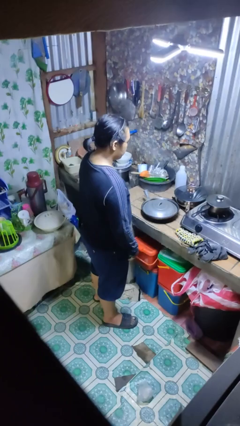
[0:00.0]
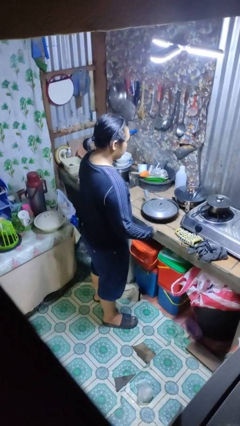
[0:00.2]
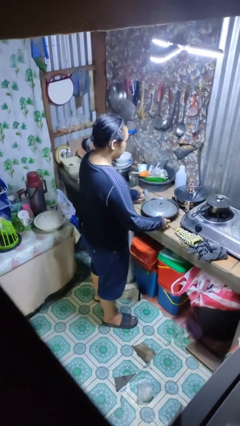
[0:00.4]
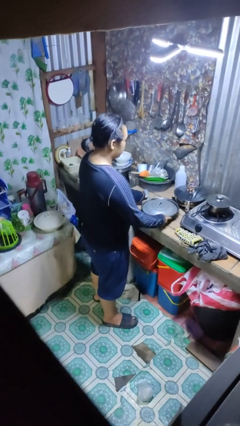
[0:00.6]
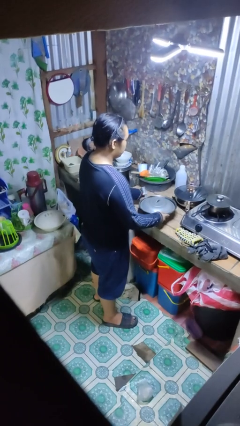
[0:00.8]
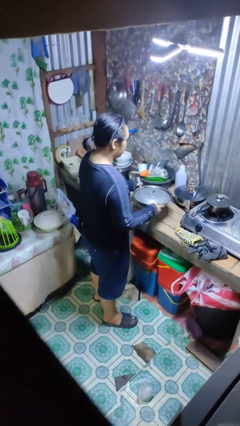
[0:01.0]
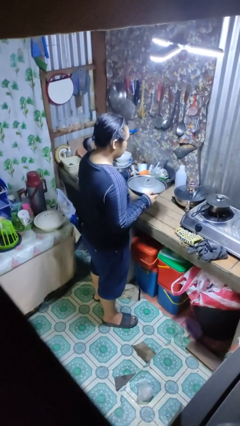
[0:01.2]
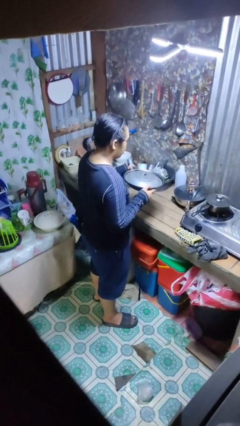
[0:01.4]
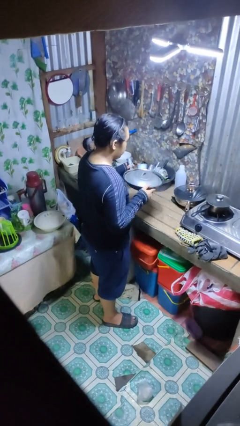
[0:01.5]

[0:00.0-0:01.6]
person picks up object from countertop

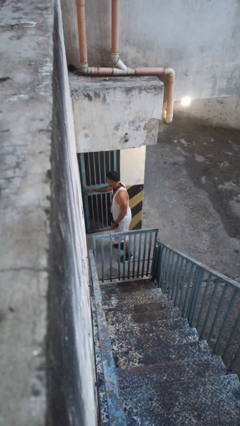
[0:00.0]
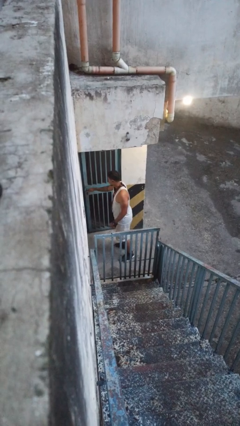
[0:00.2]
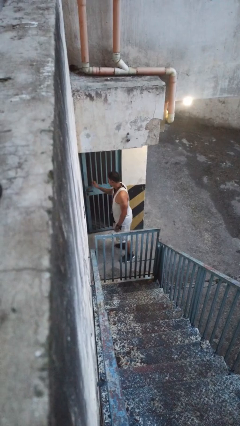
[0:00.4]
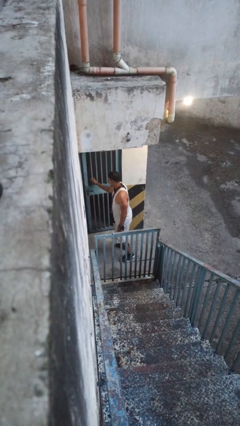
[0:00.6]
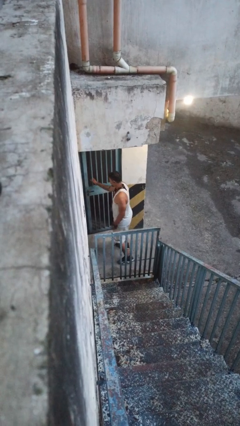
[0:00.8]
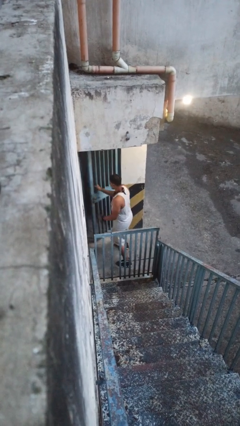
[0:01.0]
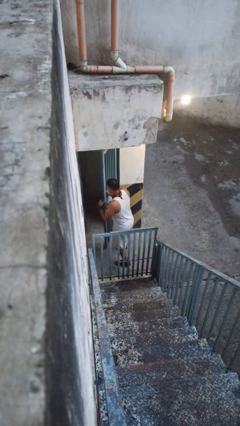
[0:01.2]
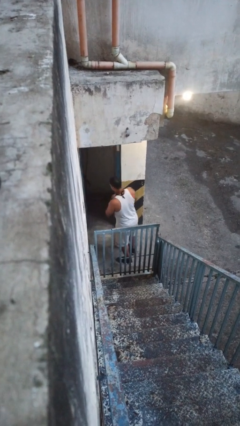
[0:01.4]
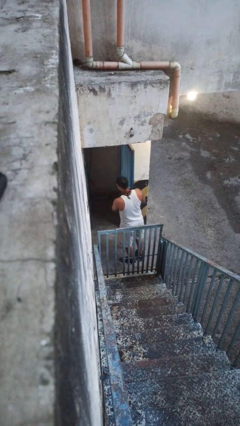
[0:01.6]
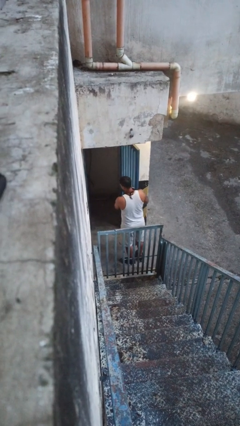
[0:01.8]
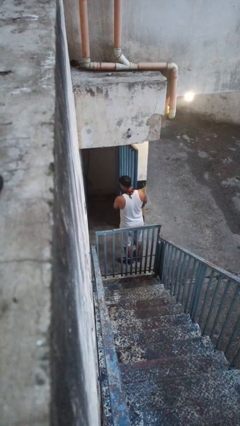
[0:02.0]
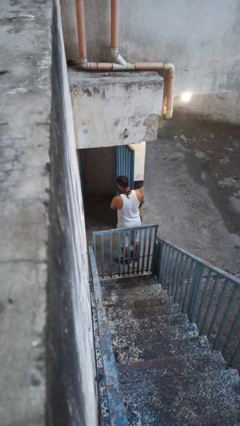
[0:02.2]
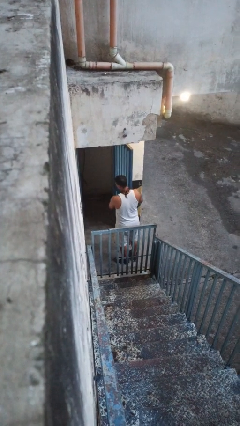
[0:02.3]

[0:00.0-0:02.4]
person opens facility door

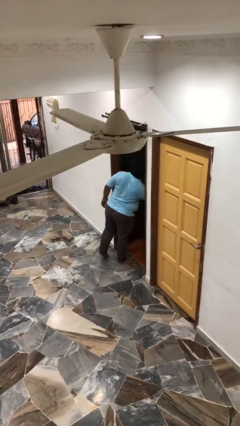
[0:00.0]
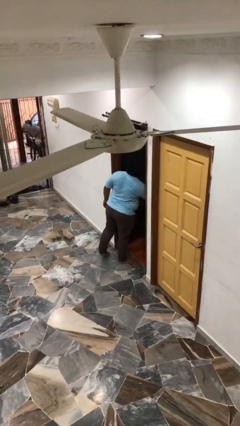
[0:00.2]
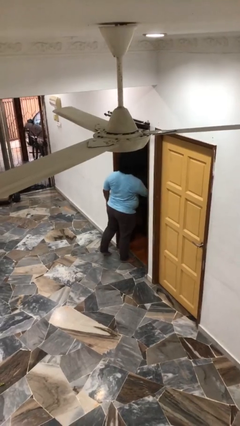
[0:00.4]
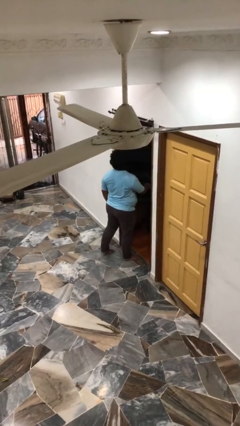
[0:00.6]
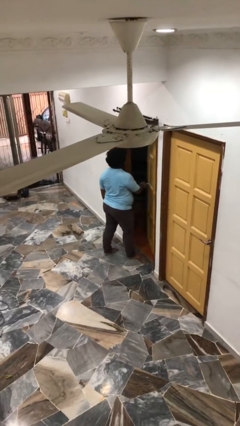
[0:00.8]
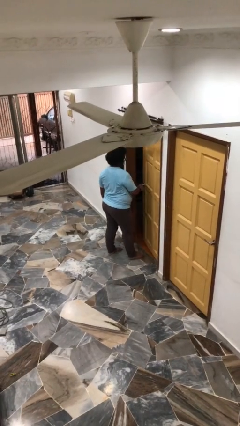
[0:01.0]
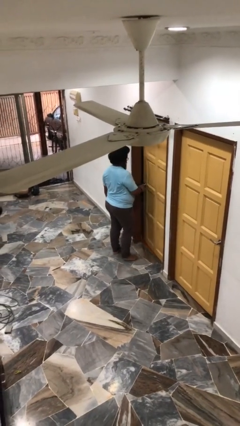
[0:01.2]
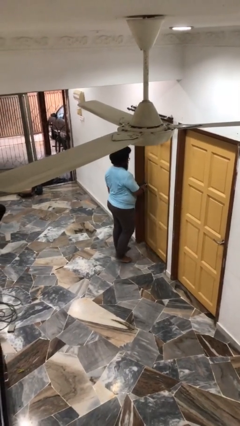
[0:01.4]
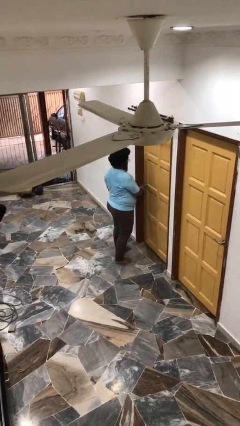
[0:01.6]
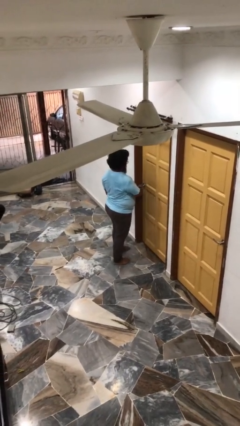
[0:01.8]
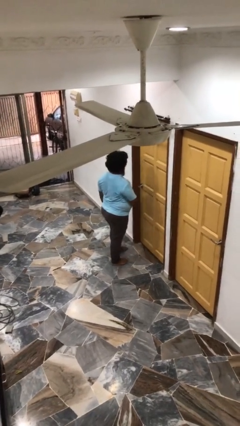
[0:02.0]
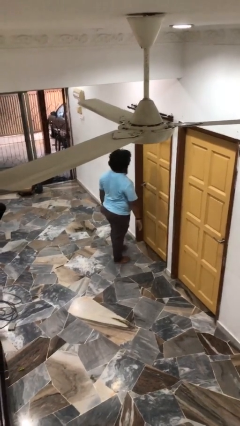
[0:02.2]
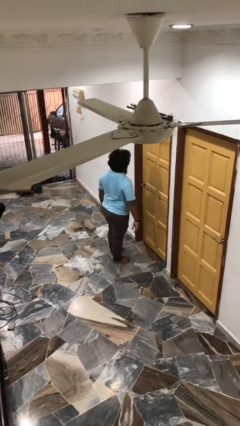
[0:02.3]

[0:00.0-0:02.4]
person closes facility door

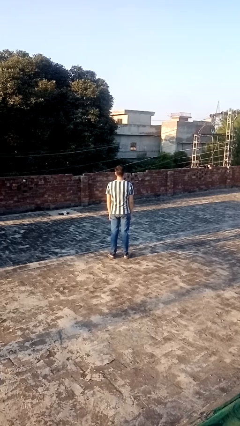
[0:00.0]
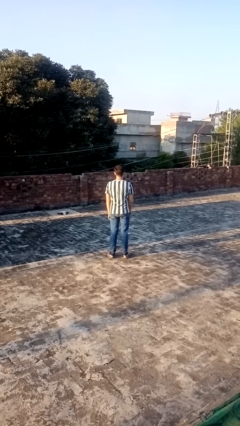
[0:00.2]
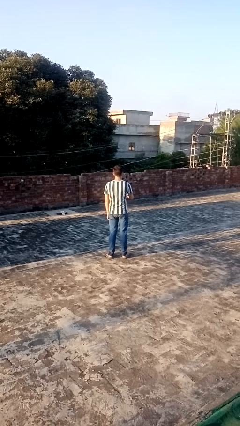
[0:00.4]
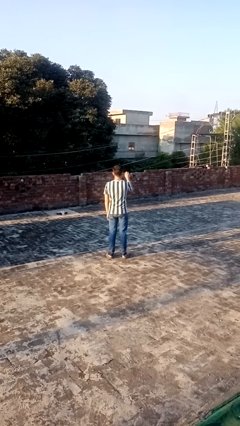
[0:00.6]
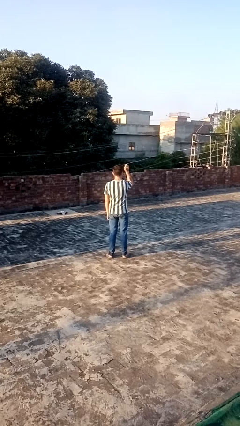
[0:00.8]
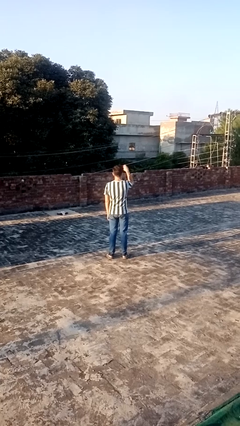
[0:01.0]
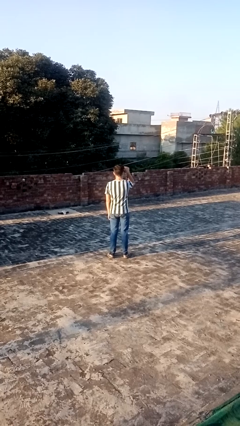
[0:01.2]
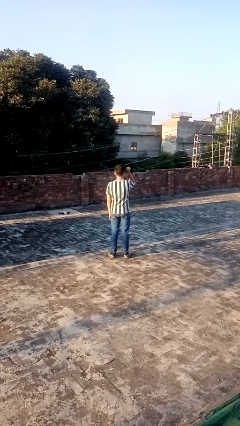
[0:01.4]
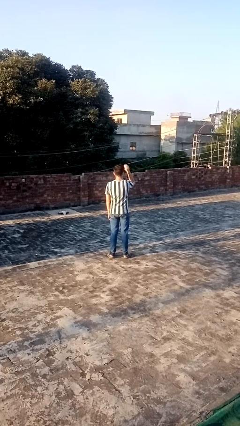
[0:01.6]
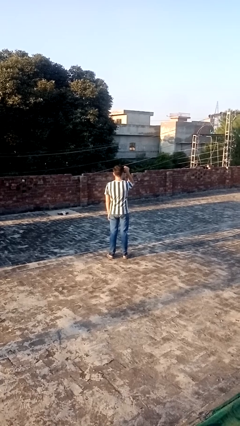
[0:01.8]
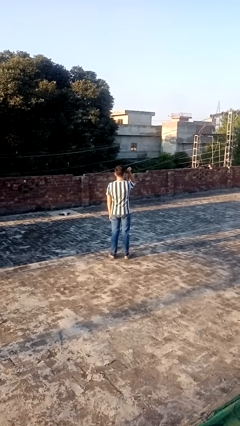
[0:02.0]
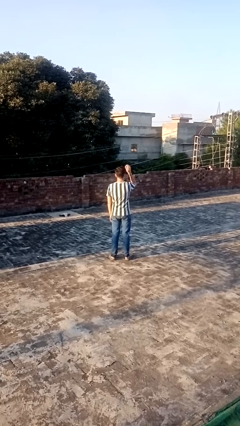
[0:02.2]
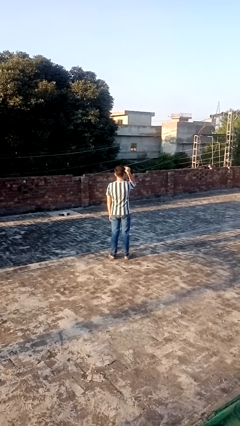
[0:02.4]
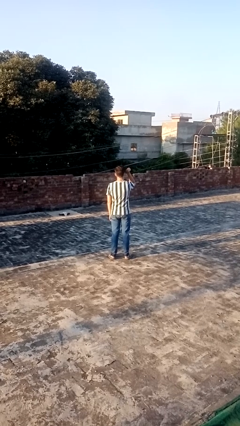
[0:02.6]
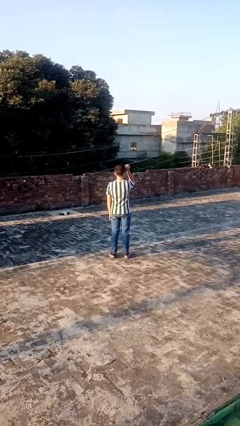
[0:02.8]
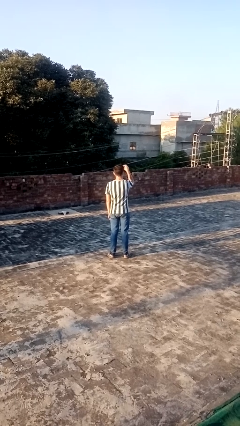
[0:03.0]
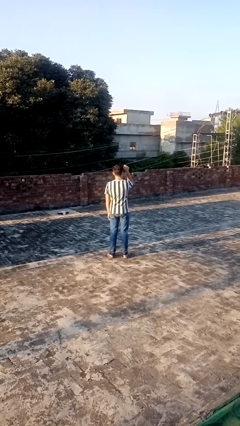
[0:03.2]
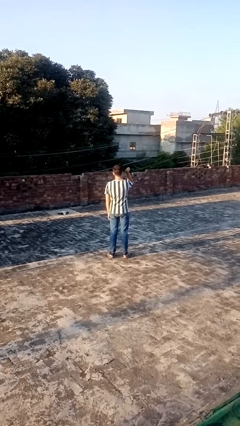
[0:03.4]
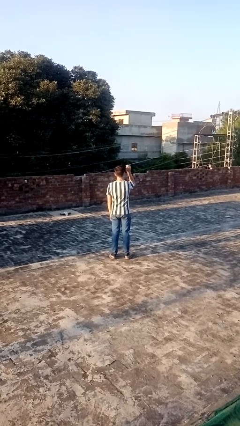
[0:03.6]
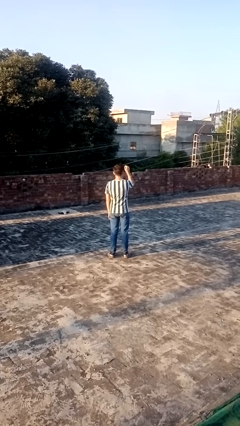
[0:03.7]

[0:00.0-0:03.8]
person gestures come here

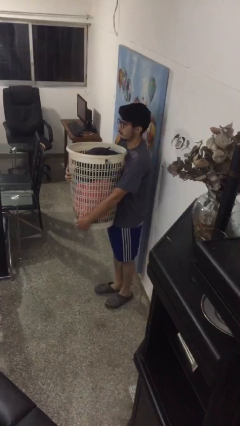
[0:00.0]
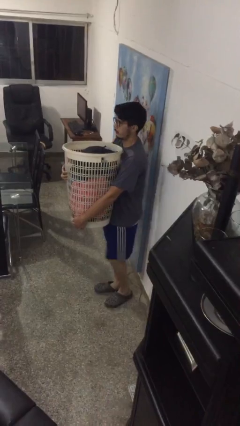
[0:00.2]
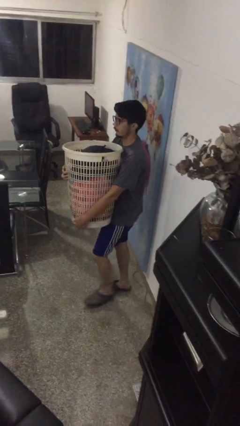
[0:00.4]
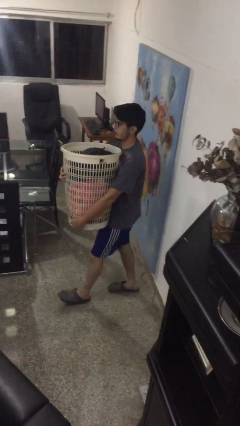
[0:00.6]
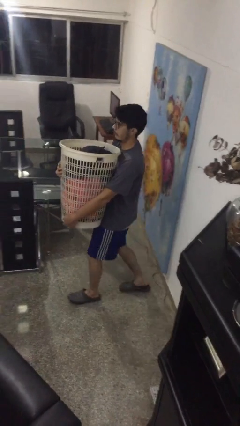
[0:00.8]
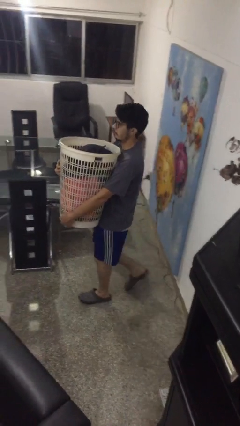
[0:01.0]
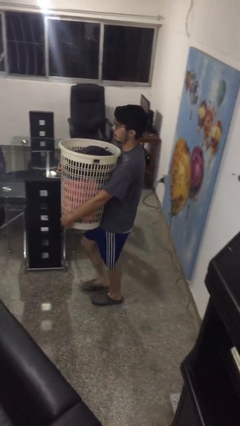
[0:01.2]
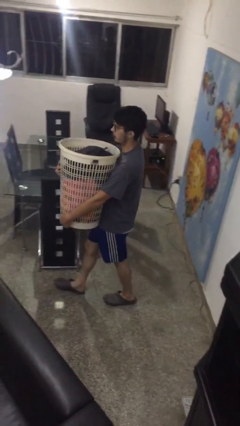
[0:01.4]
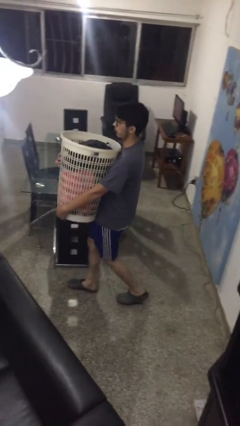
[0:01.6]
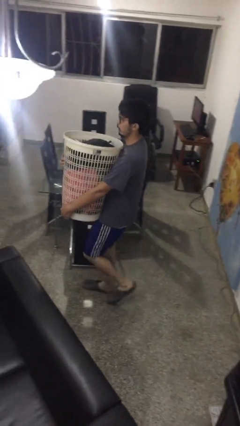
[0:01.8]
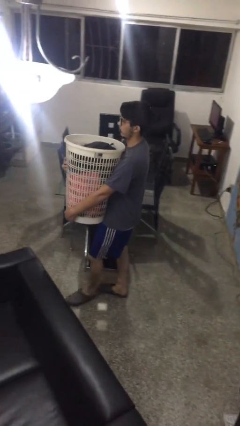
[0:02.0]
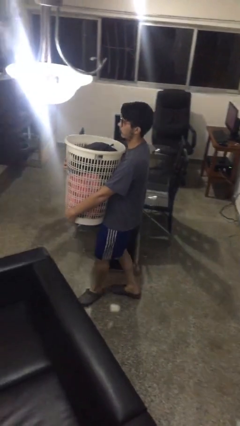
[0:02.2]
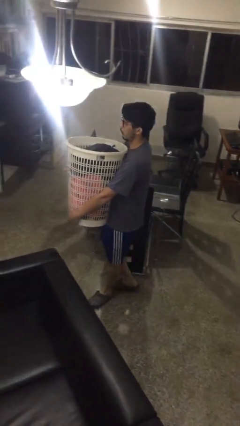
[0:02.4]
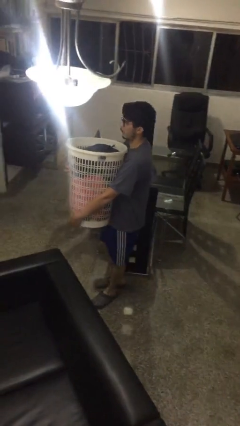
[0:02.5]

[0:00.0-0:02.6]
person carries laundry basket

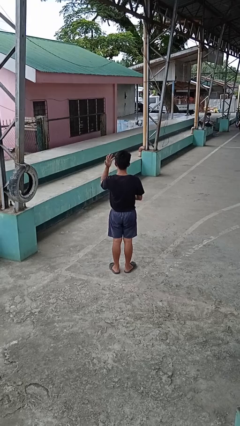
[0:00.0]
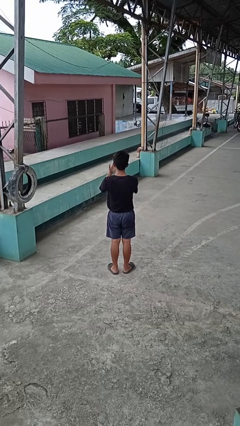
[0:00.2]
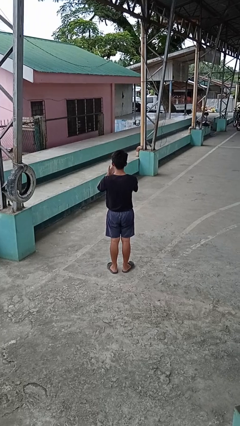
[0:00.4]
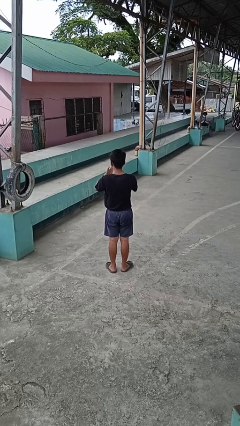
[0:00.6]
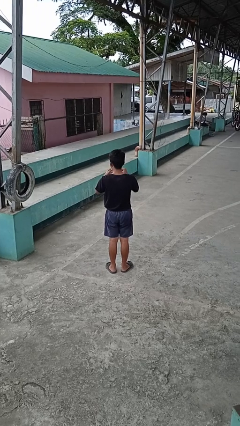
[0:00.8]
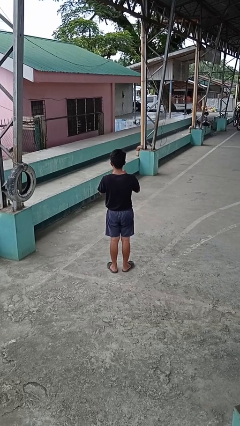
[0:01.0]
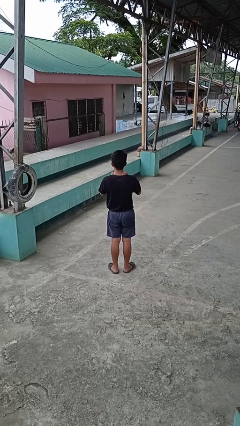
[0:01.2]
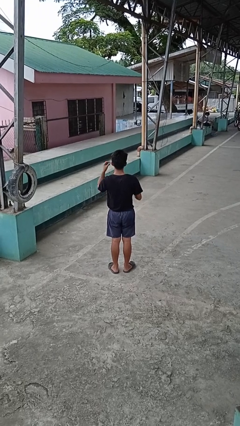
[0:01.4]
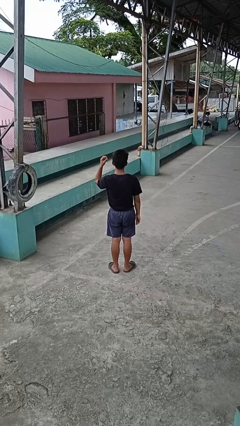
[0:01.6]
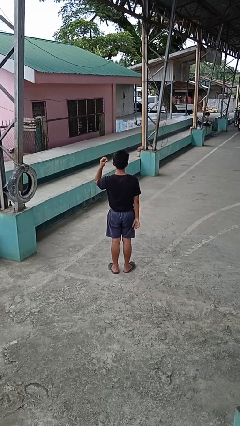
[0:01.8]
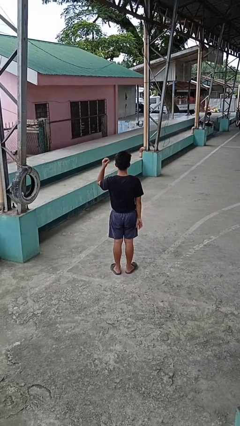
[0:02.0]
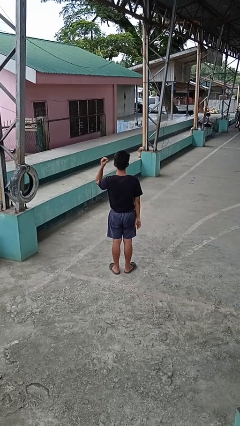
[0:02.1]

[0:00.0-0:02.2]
person takes off ring

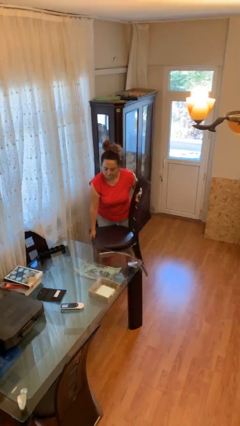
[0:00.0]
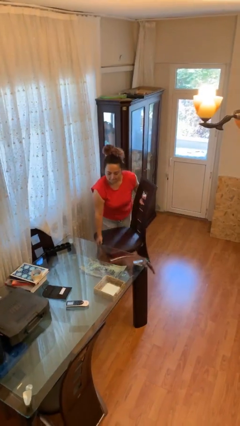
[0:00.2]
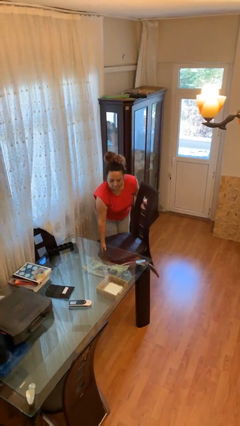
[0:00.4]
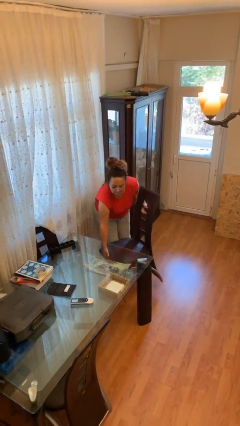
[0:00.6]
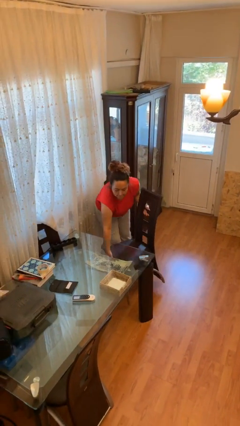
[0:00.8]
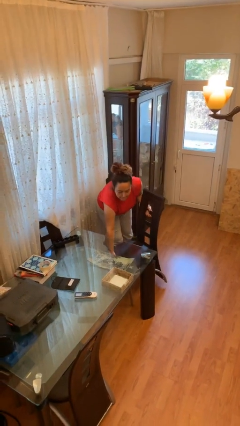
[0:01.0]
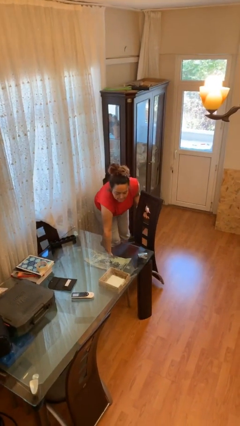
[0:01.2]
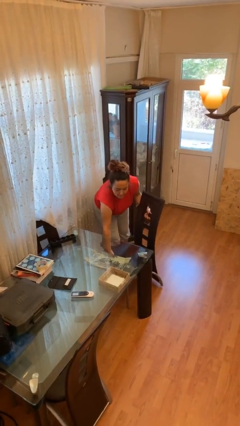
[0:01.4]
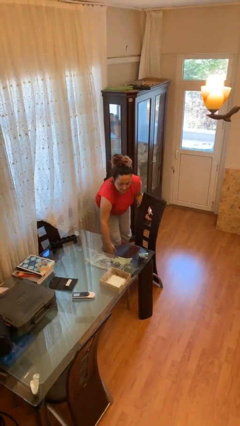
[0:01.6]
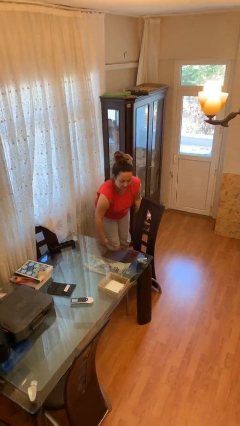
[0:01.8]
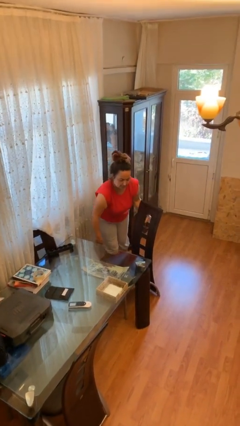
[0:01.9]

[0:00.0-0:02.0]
person puts down object on floor
